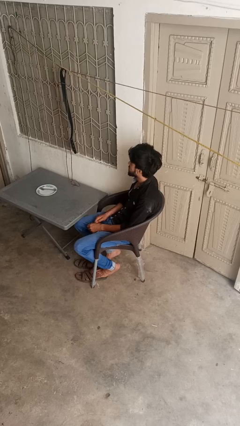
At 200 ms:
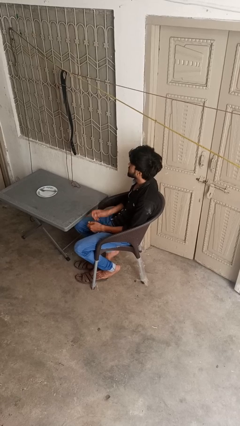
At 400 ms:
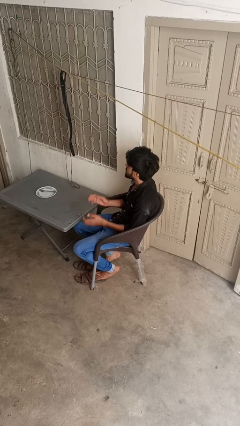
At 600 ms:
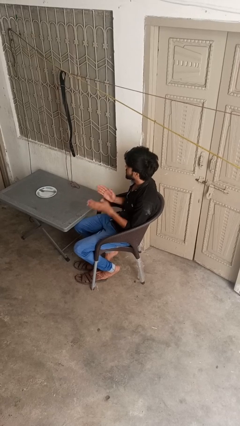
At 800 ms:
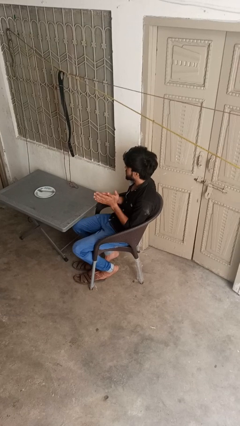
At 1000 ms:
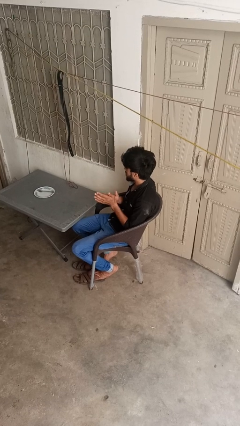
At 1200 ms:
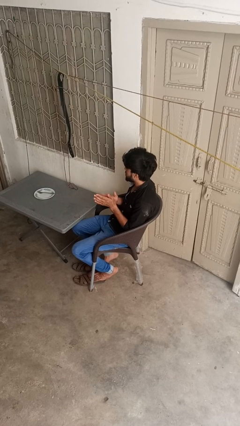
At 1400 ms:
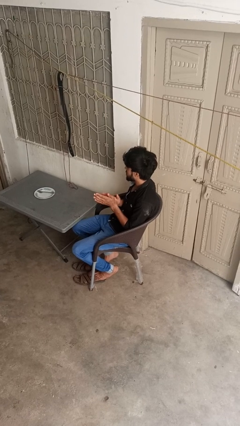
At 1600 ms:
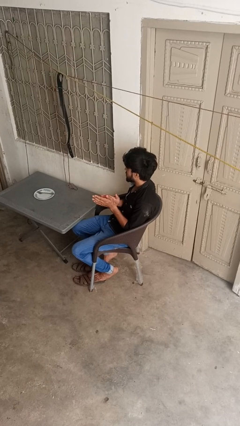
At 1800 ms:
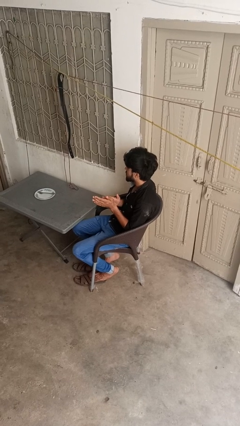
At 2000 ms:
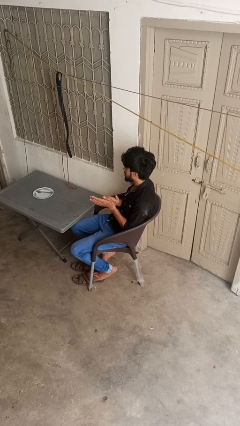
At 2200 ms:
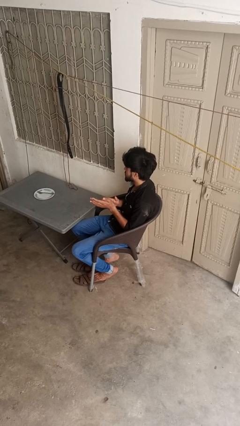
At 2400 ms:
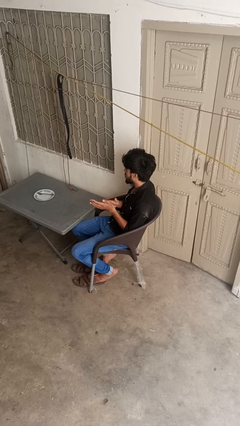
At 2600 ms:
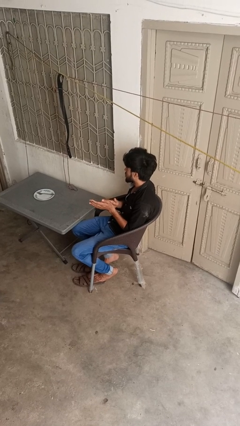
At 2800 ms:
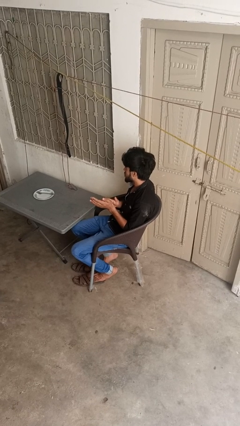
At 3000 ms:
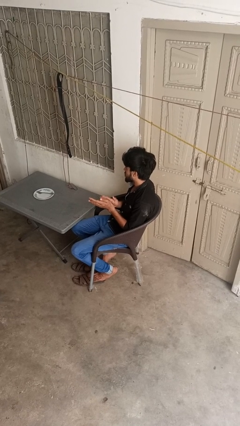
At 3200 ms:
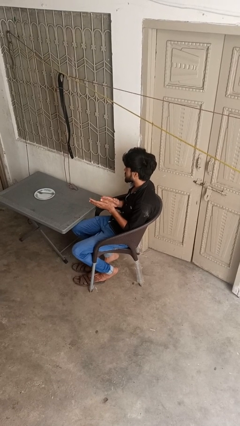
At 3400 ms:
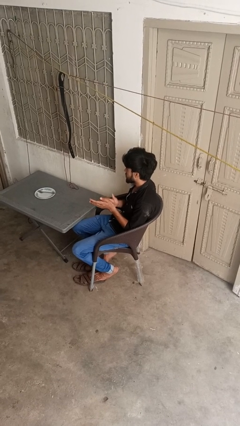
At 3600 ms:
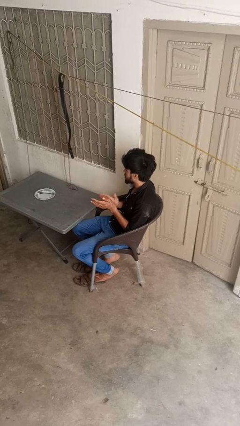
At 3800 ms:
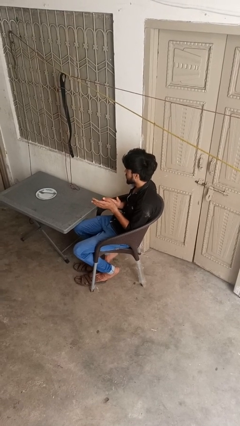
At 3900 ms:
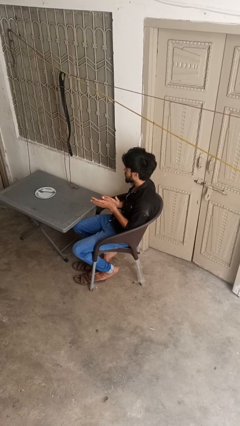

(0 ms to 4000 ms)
person claps hands

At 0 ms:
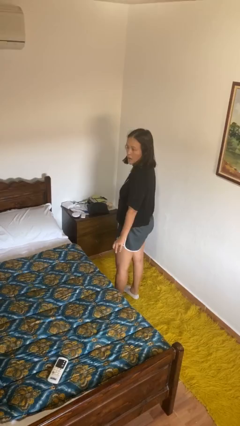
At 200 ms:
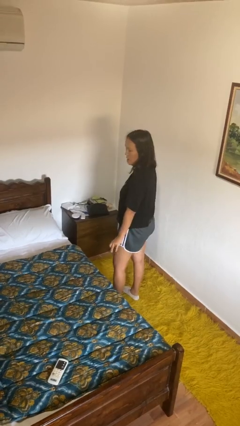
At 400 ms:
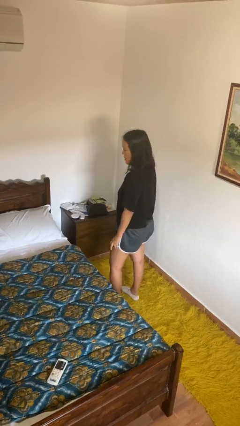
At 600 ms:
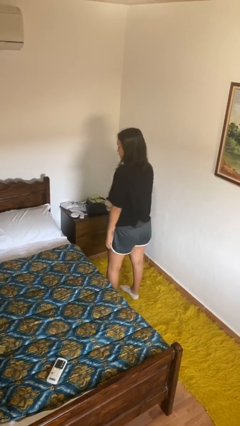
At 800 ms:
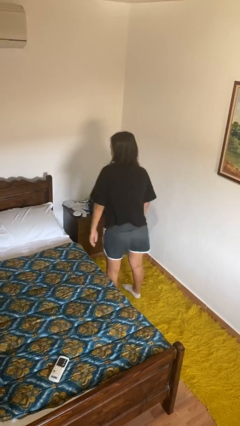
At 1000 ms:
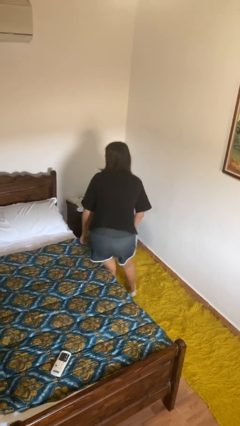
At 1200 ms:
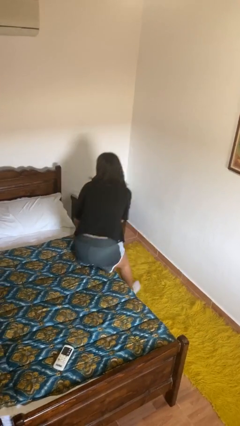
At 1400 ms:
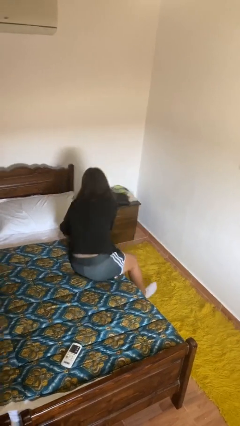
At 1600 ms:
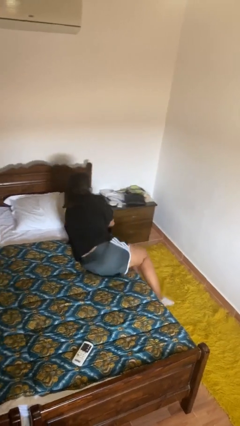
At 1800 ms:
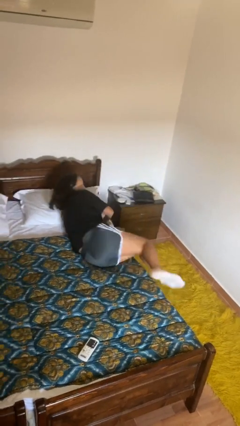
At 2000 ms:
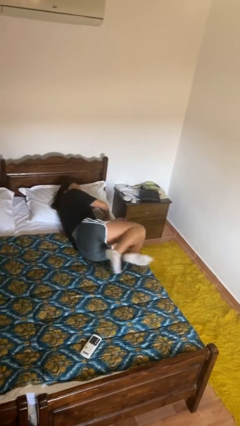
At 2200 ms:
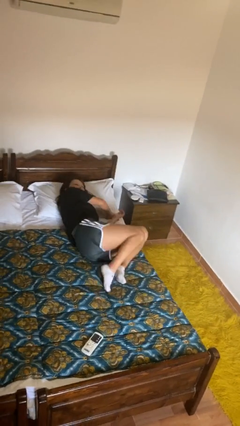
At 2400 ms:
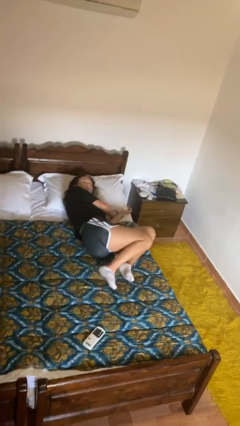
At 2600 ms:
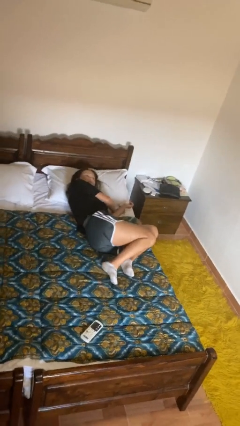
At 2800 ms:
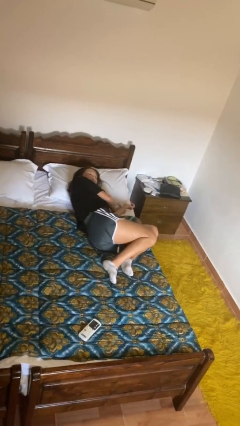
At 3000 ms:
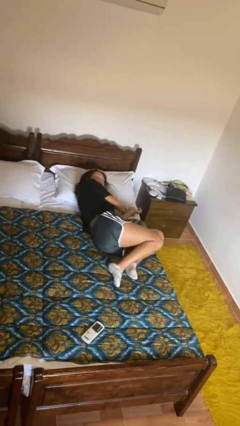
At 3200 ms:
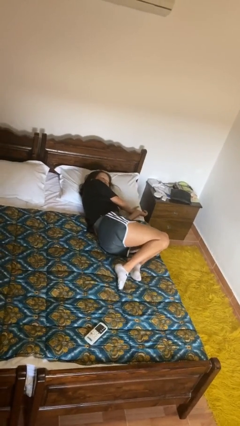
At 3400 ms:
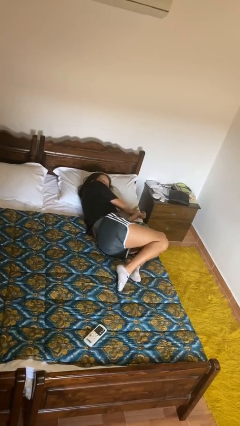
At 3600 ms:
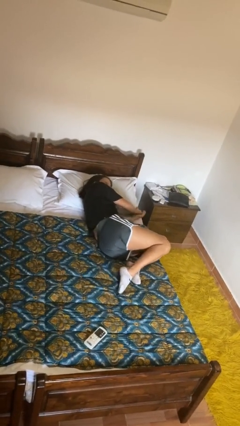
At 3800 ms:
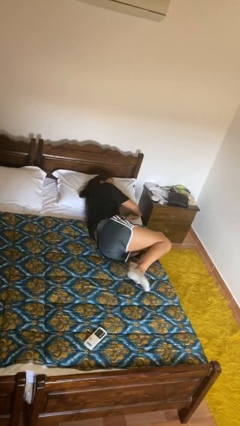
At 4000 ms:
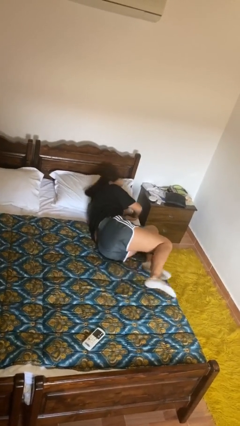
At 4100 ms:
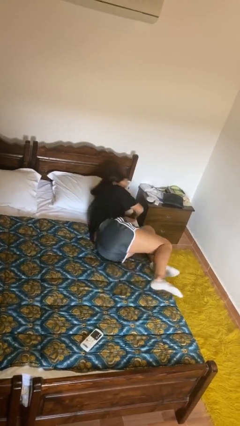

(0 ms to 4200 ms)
person lies down on bed

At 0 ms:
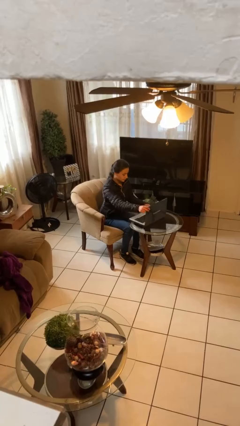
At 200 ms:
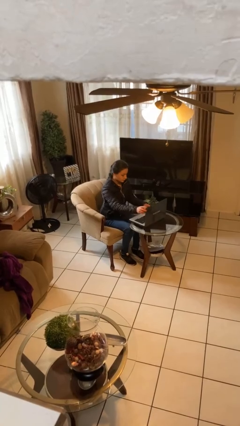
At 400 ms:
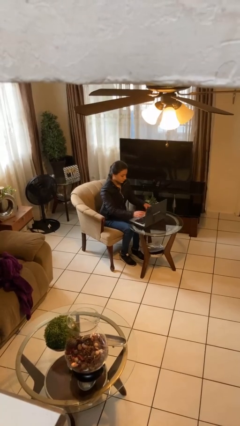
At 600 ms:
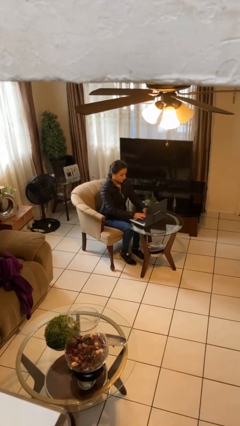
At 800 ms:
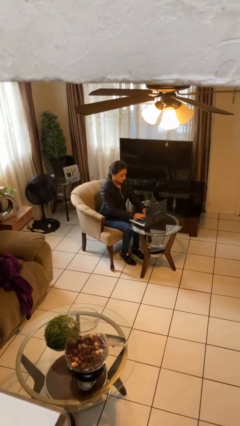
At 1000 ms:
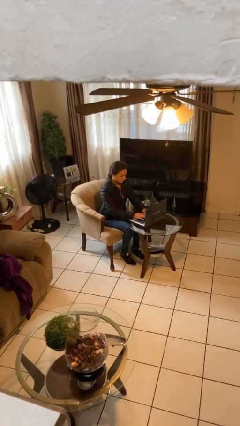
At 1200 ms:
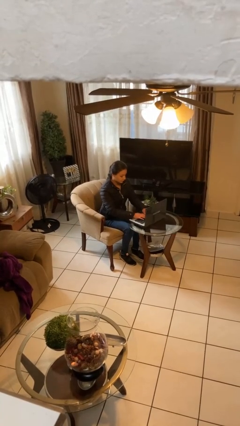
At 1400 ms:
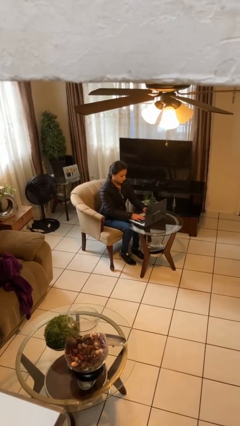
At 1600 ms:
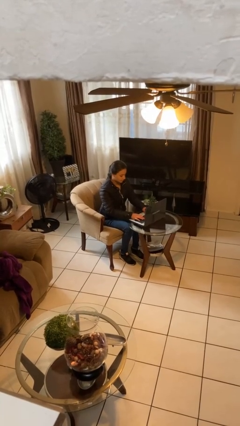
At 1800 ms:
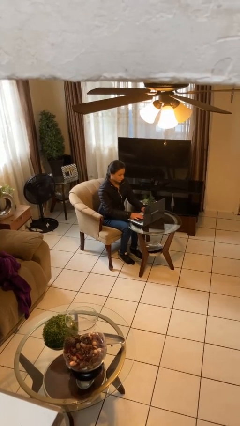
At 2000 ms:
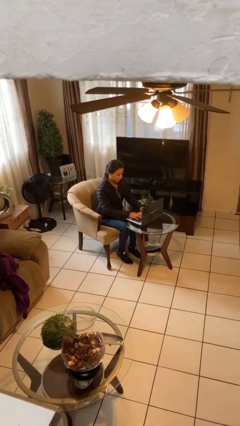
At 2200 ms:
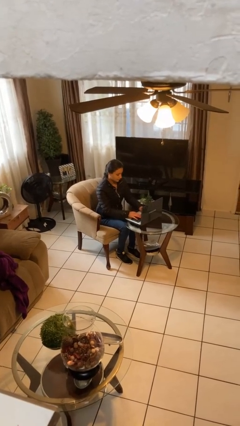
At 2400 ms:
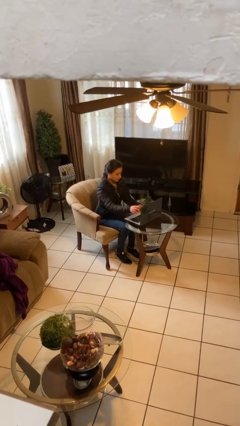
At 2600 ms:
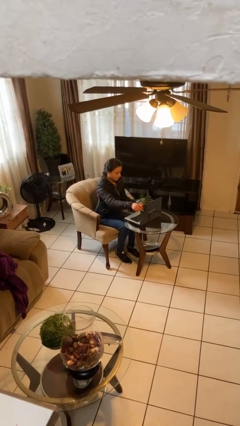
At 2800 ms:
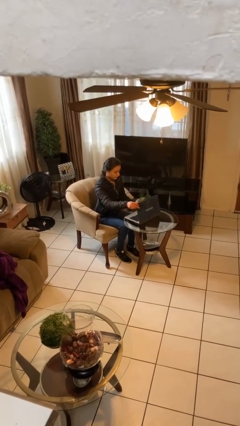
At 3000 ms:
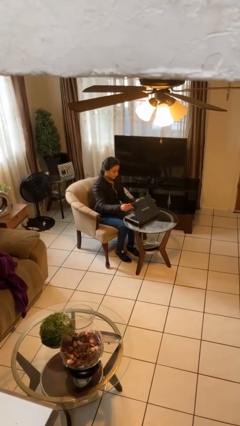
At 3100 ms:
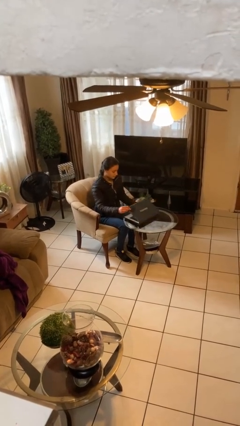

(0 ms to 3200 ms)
person interacts with laptop

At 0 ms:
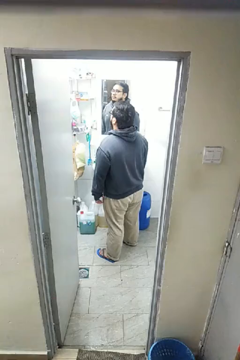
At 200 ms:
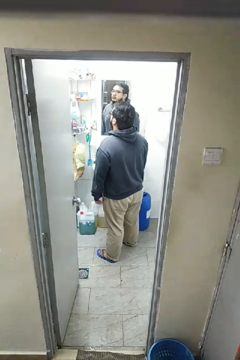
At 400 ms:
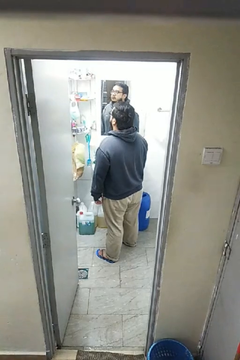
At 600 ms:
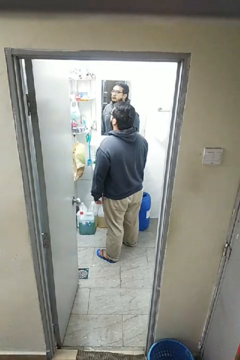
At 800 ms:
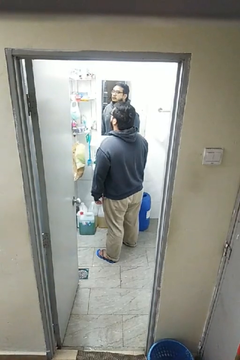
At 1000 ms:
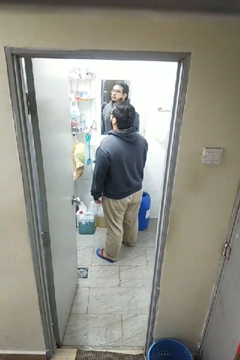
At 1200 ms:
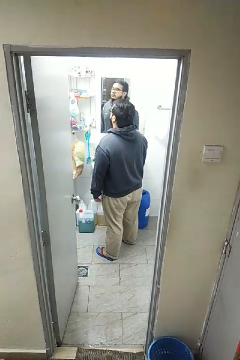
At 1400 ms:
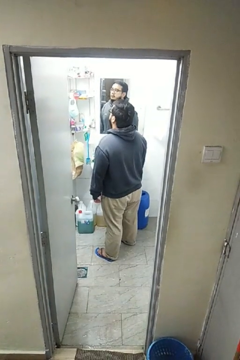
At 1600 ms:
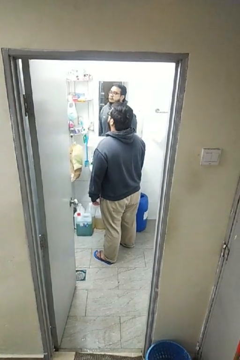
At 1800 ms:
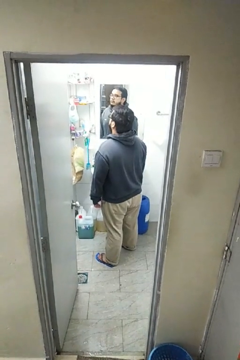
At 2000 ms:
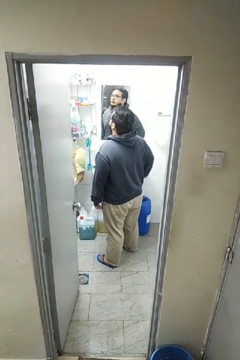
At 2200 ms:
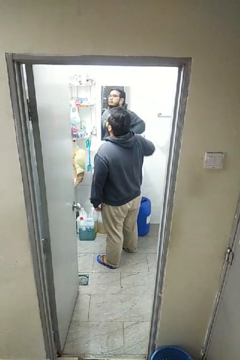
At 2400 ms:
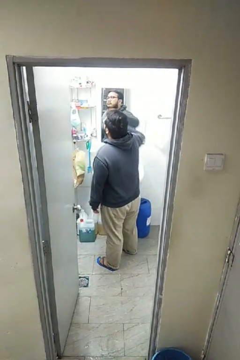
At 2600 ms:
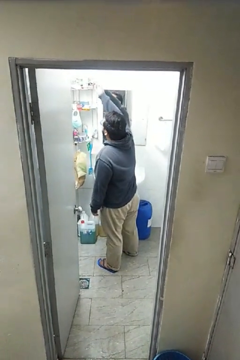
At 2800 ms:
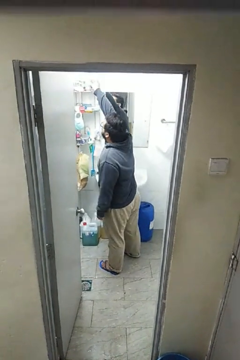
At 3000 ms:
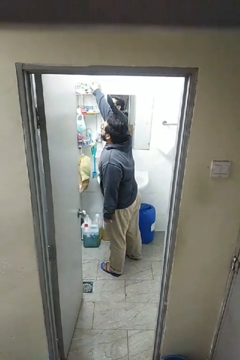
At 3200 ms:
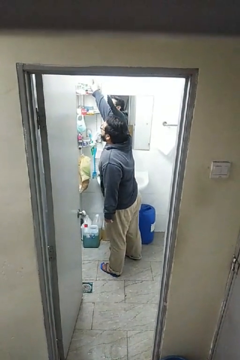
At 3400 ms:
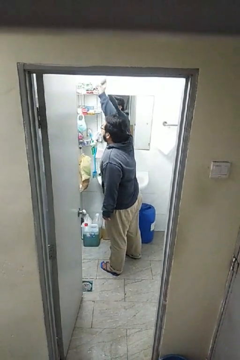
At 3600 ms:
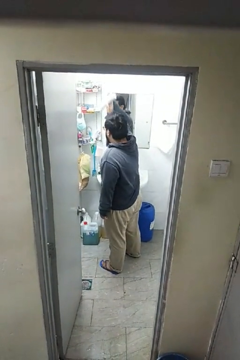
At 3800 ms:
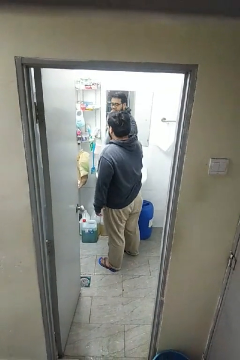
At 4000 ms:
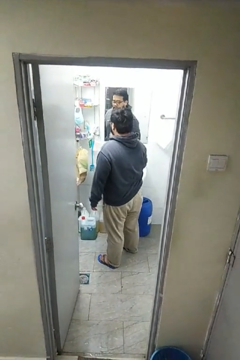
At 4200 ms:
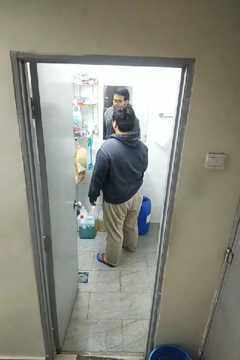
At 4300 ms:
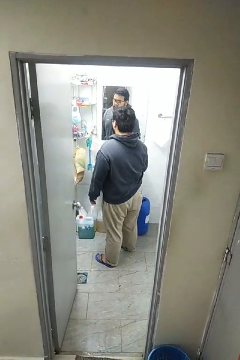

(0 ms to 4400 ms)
person picks up object from countertop

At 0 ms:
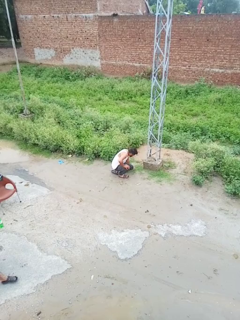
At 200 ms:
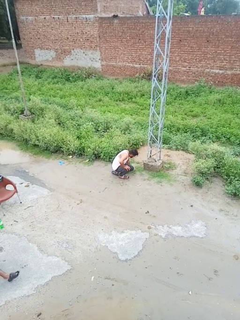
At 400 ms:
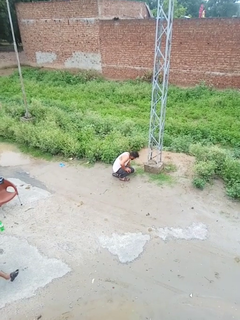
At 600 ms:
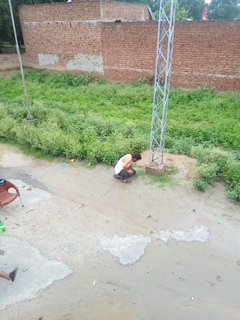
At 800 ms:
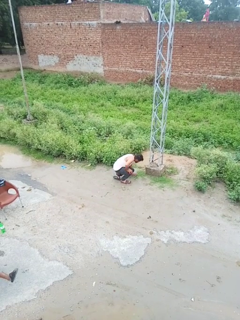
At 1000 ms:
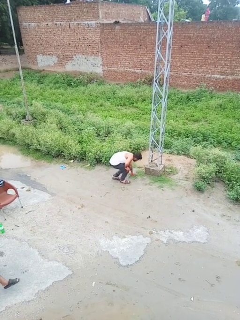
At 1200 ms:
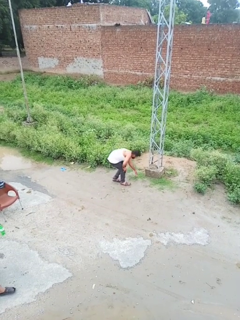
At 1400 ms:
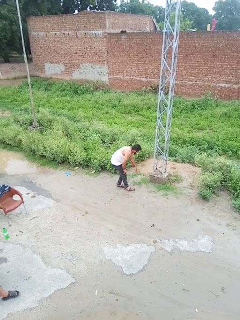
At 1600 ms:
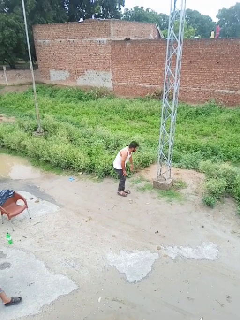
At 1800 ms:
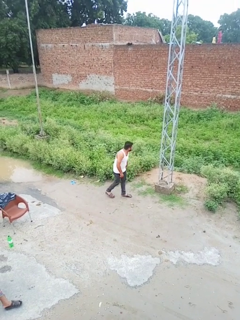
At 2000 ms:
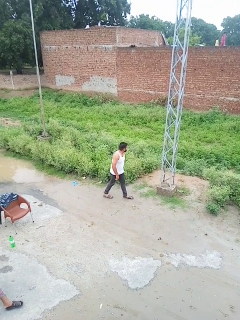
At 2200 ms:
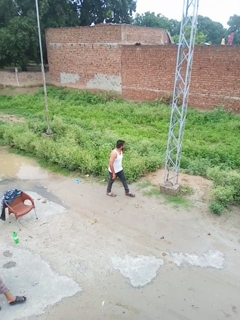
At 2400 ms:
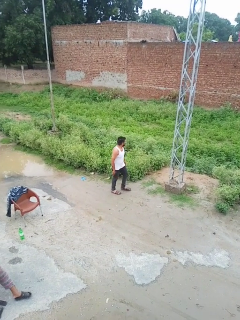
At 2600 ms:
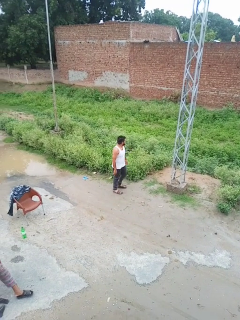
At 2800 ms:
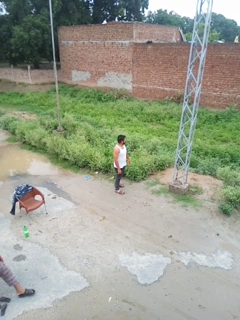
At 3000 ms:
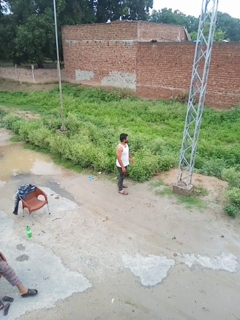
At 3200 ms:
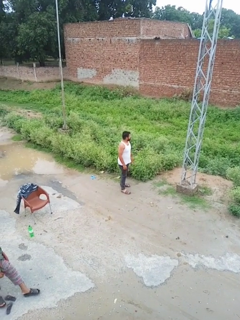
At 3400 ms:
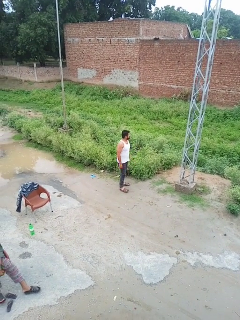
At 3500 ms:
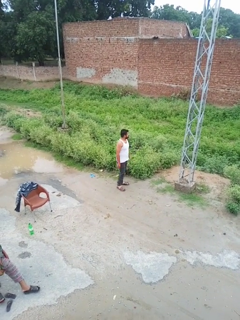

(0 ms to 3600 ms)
person stands up from floor
